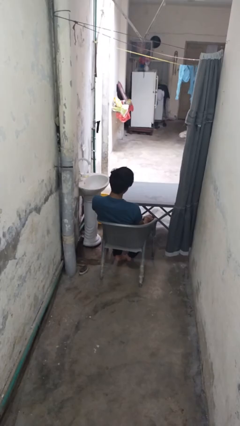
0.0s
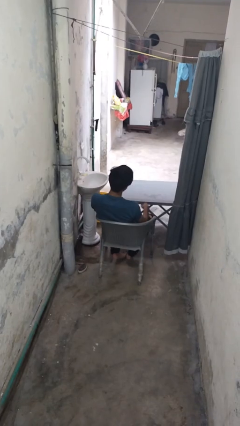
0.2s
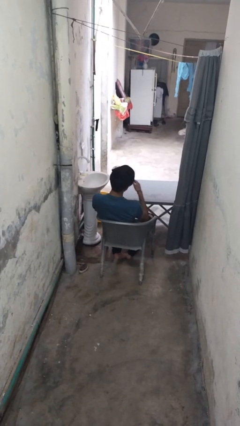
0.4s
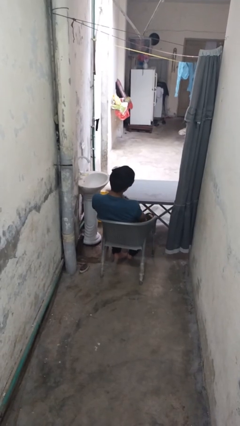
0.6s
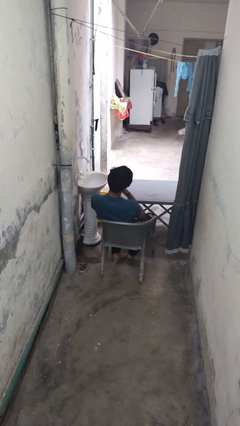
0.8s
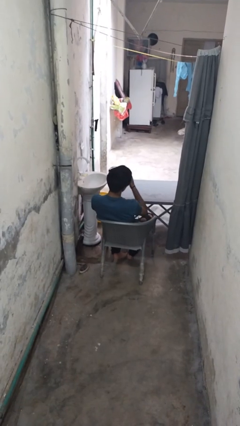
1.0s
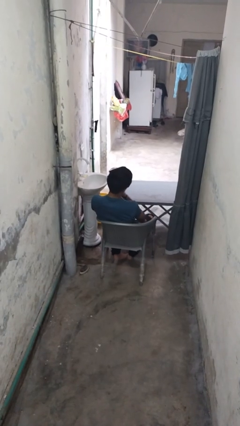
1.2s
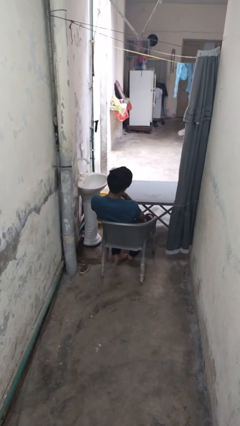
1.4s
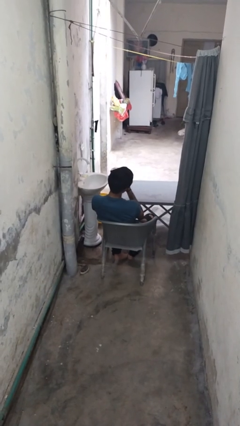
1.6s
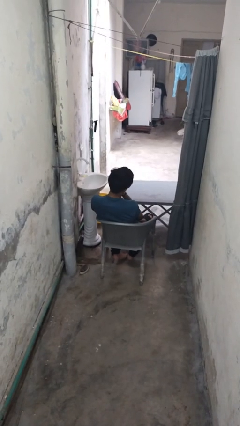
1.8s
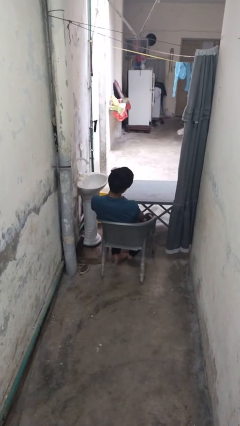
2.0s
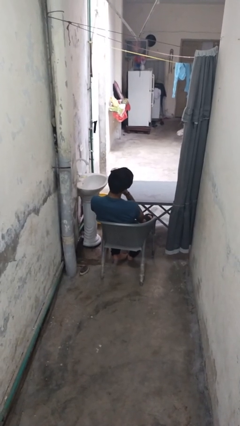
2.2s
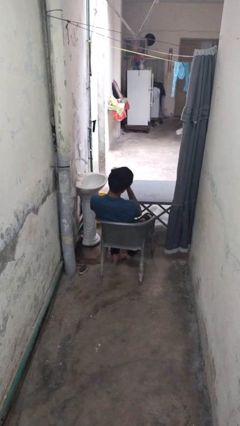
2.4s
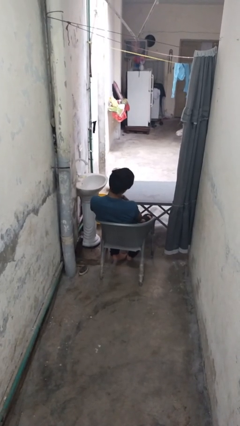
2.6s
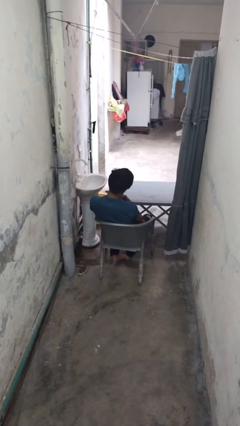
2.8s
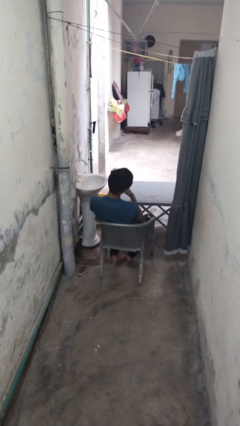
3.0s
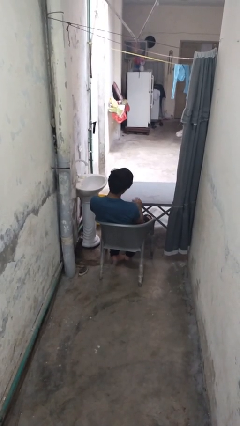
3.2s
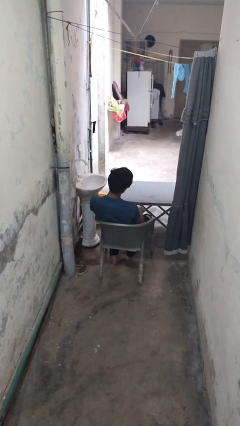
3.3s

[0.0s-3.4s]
person drums on chest

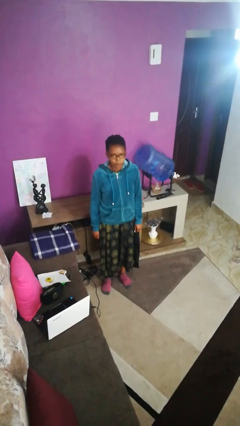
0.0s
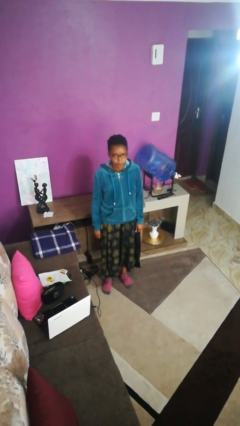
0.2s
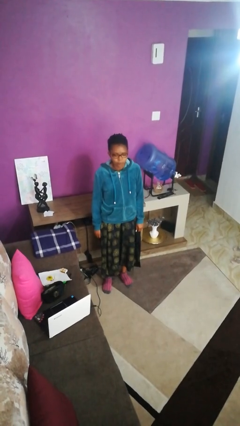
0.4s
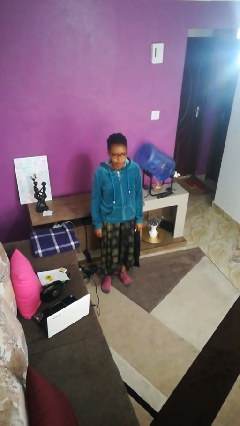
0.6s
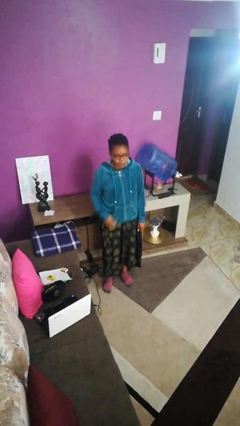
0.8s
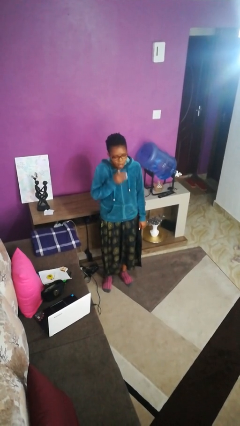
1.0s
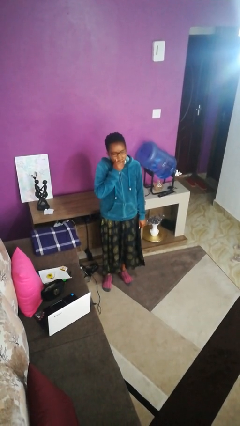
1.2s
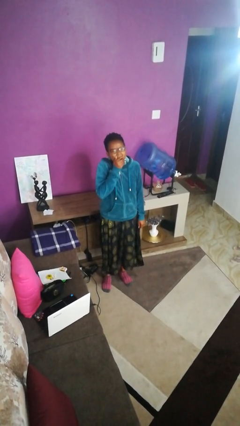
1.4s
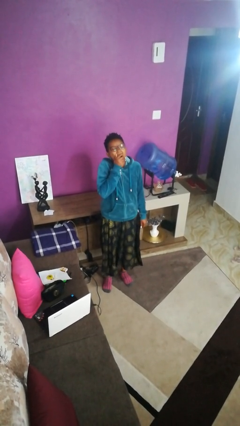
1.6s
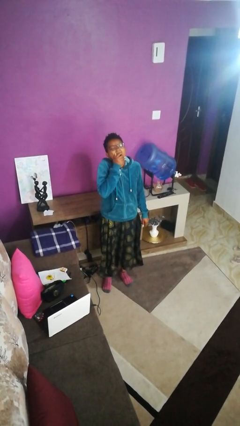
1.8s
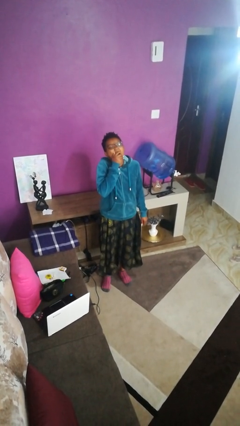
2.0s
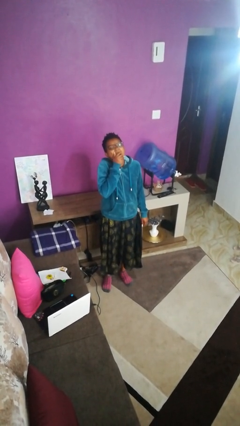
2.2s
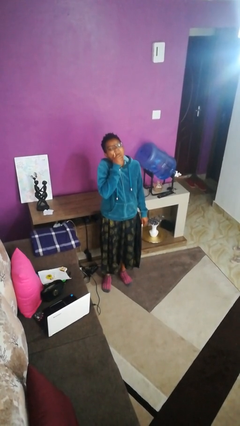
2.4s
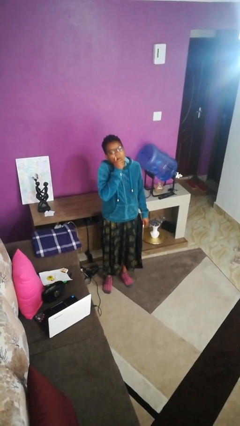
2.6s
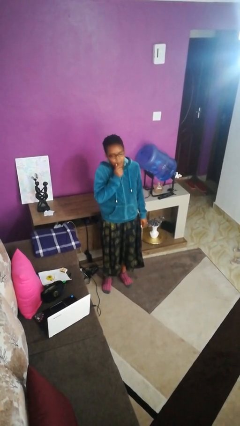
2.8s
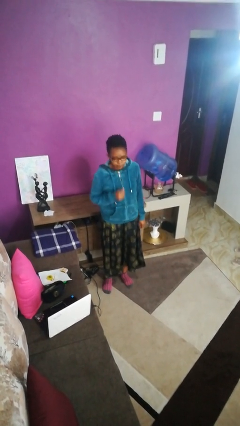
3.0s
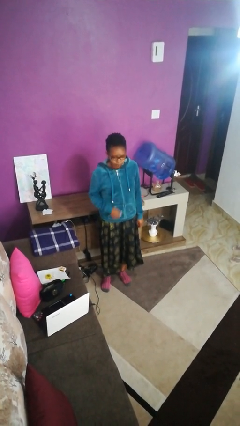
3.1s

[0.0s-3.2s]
person yawns

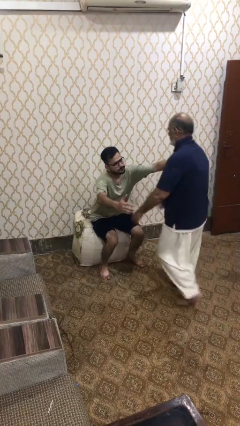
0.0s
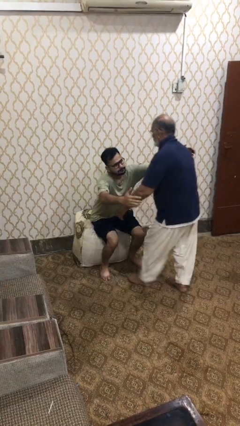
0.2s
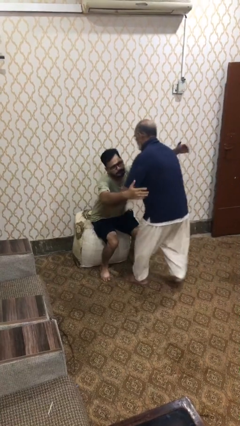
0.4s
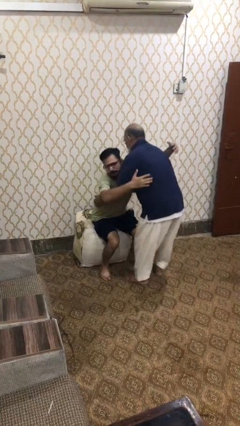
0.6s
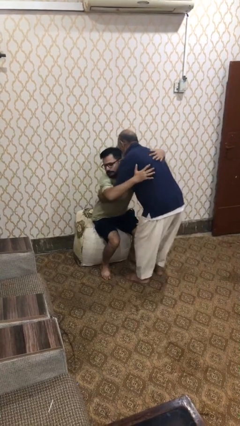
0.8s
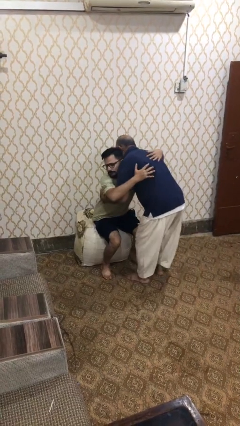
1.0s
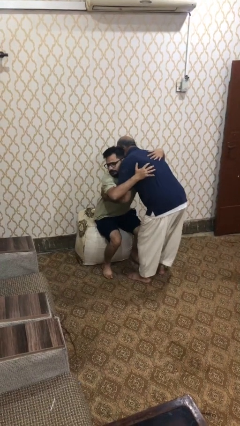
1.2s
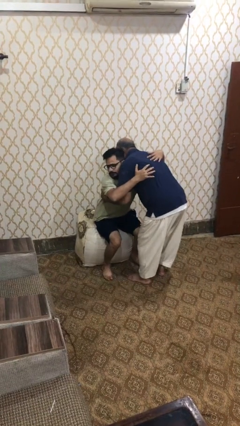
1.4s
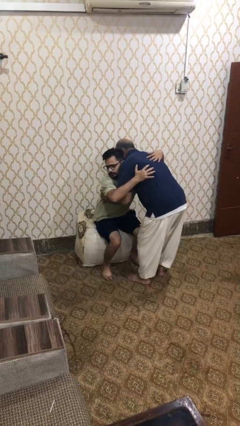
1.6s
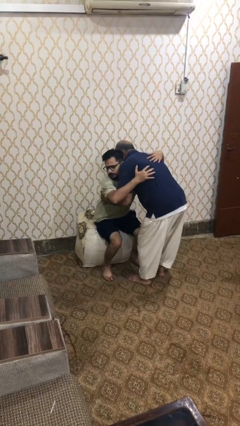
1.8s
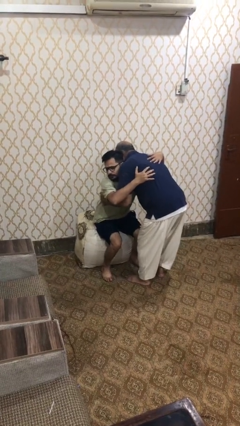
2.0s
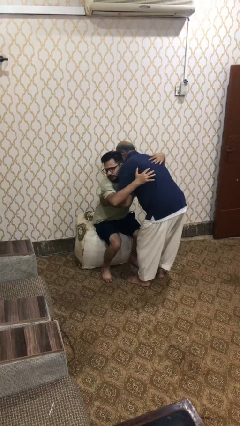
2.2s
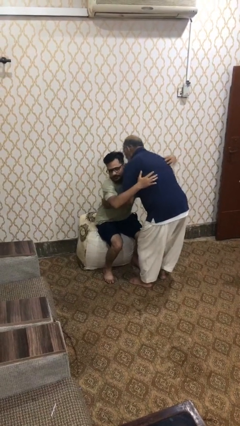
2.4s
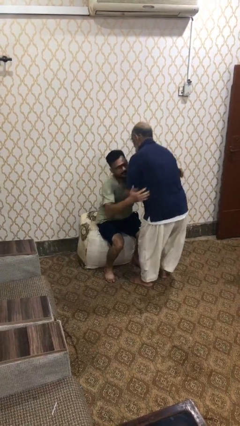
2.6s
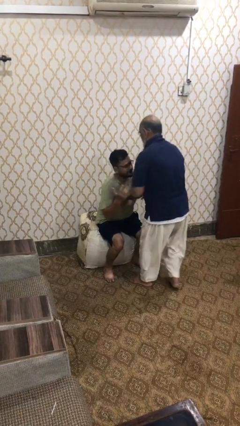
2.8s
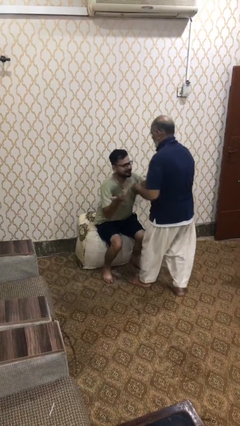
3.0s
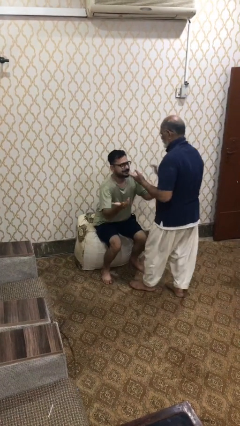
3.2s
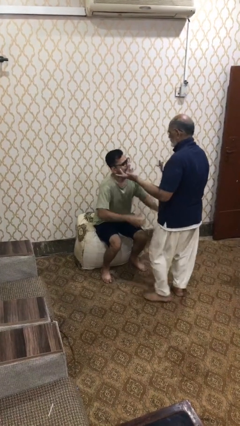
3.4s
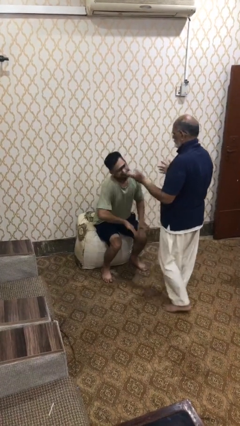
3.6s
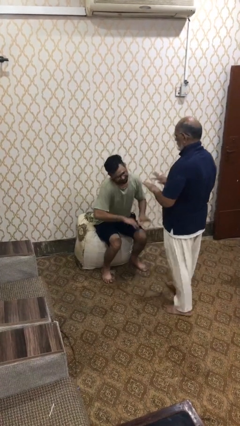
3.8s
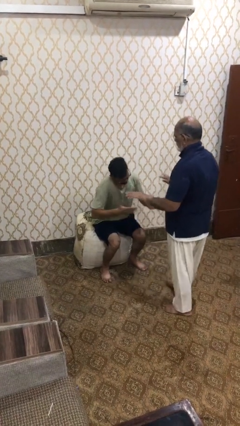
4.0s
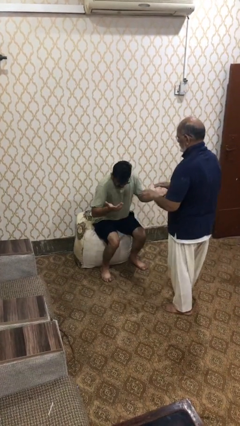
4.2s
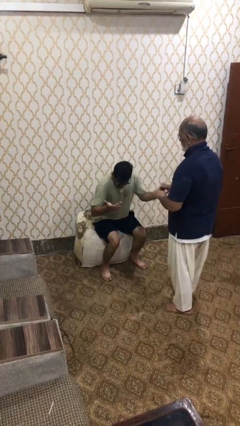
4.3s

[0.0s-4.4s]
person embraces person

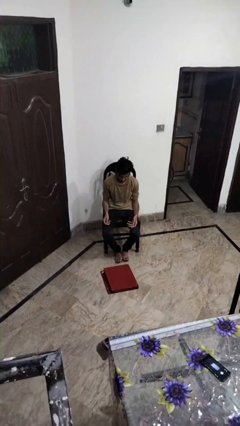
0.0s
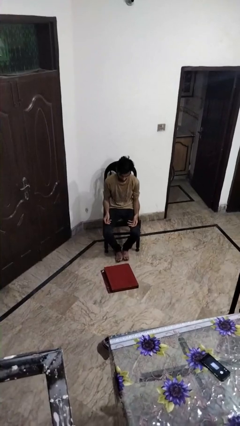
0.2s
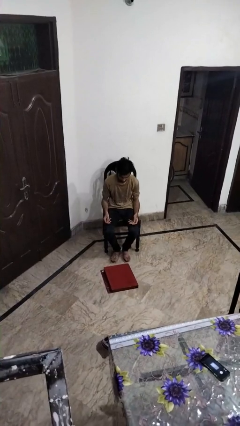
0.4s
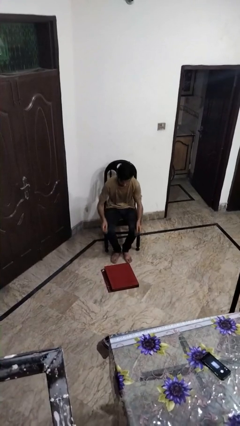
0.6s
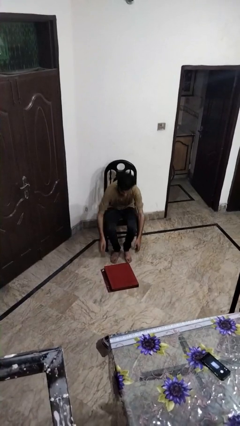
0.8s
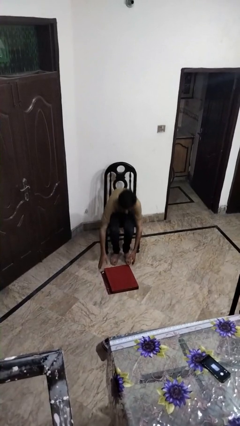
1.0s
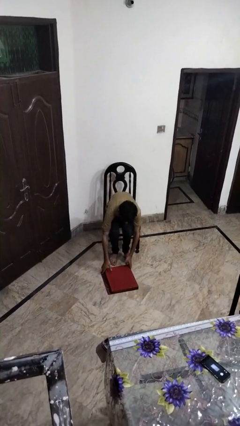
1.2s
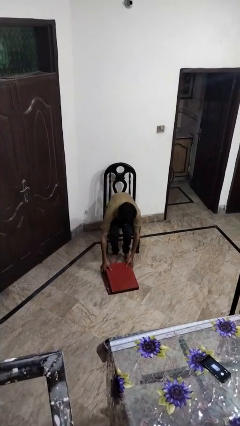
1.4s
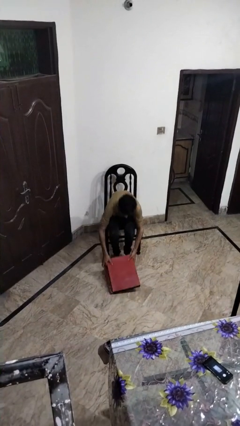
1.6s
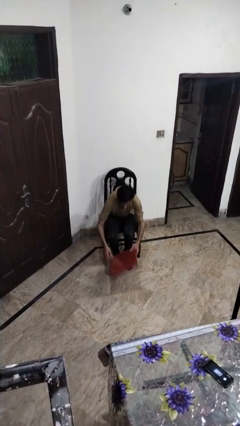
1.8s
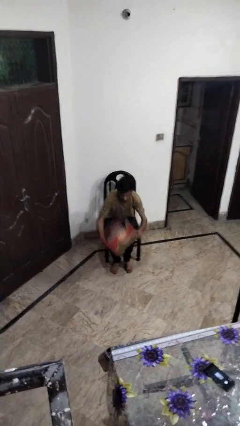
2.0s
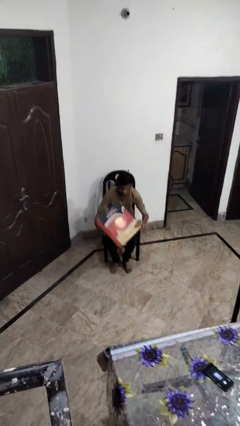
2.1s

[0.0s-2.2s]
person picks up object from floor

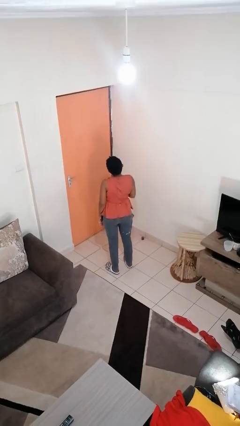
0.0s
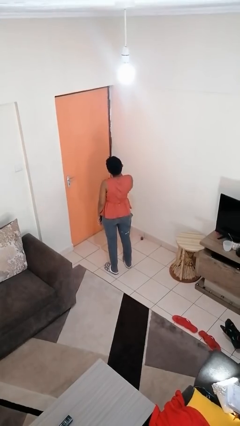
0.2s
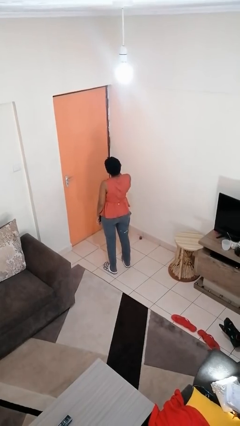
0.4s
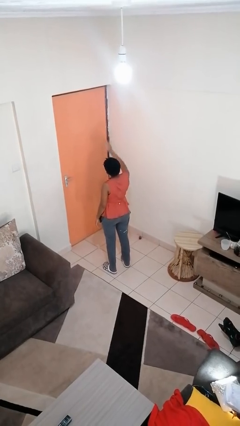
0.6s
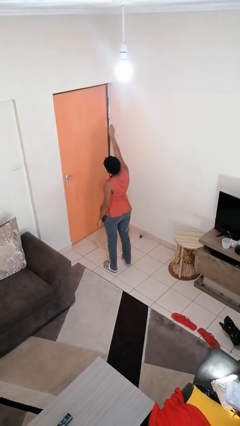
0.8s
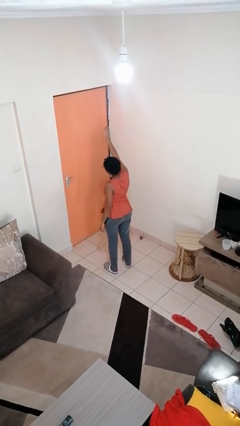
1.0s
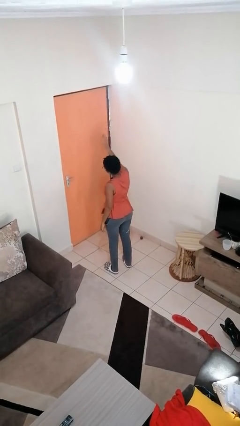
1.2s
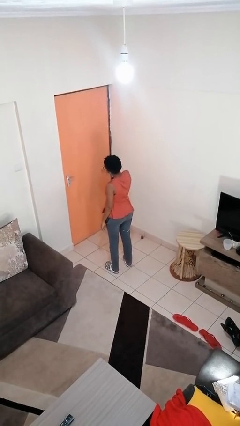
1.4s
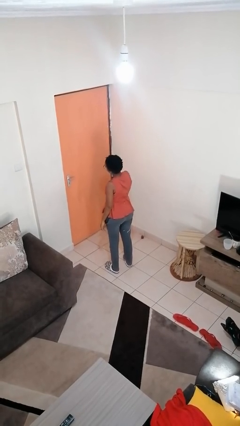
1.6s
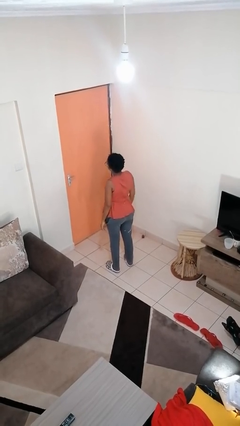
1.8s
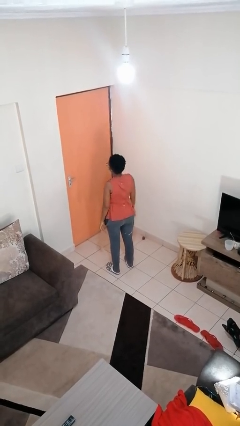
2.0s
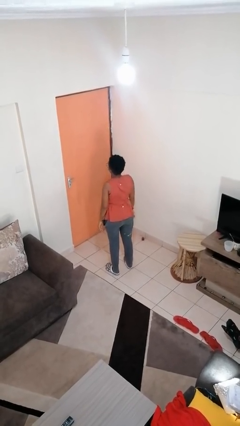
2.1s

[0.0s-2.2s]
person gestures blow kiss

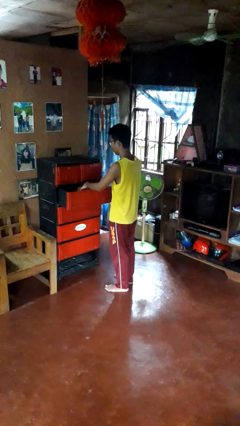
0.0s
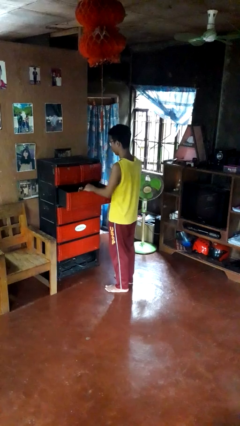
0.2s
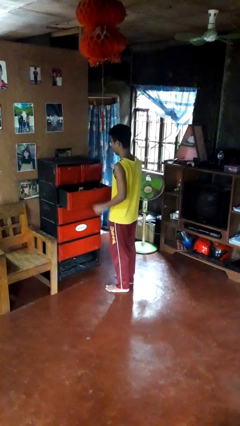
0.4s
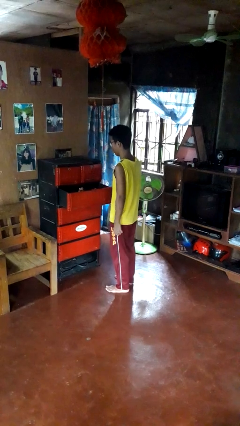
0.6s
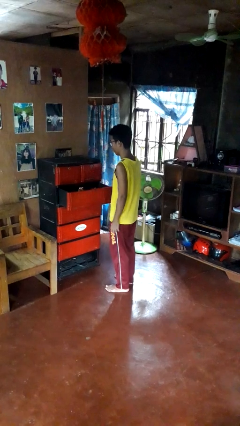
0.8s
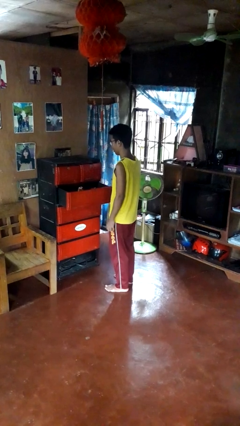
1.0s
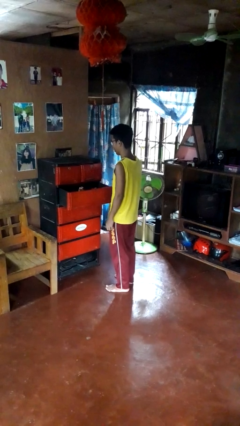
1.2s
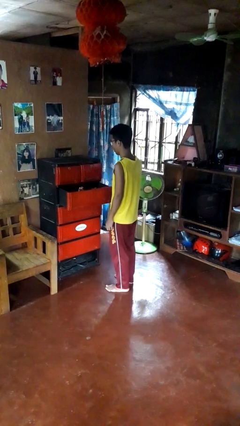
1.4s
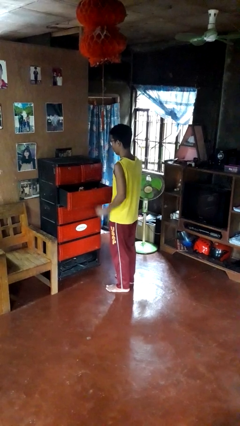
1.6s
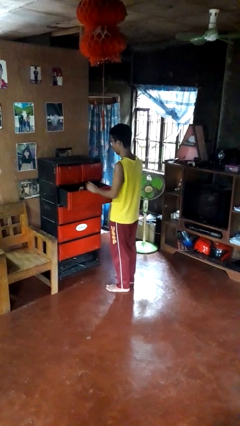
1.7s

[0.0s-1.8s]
person puts clothes into dresser

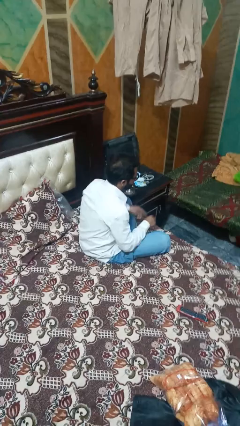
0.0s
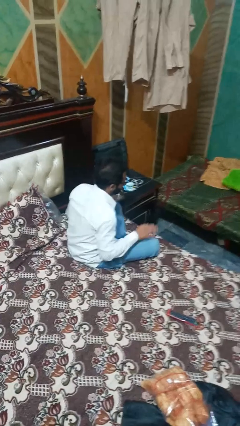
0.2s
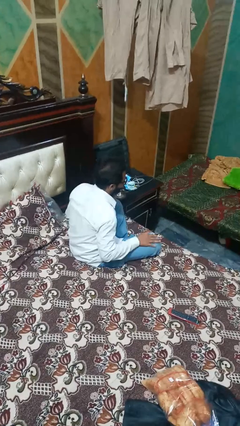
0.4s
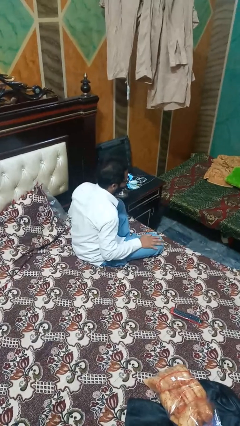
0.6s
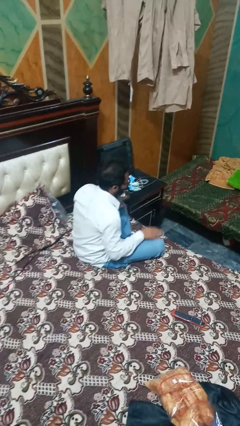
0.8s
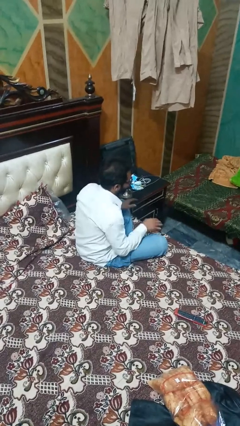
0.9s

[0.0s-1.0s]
person slaps hands on thighs
